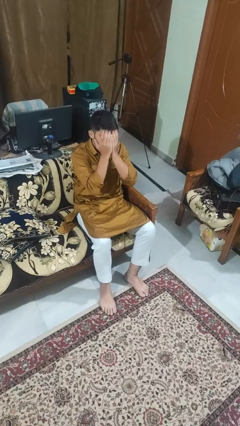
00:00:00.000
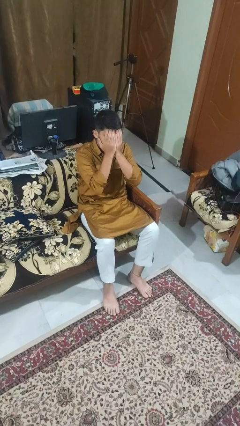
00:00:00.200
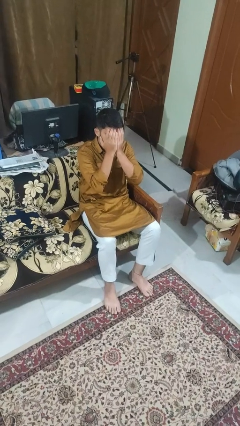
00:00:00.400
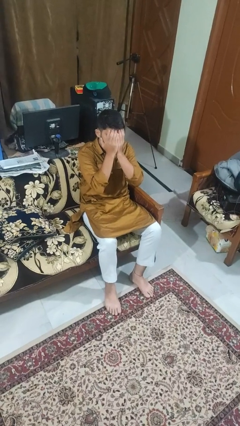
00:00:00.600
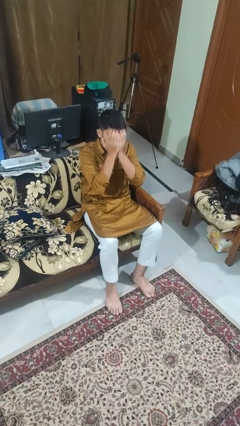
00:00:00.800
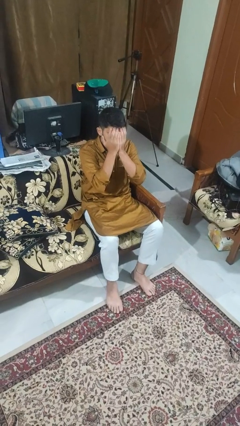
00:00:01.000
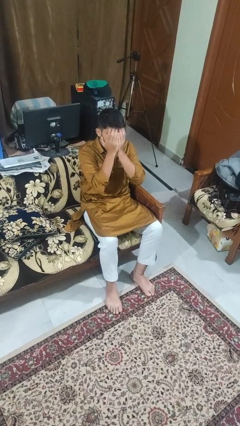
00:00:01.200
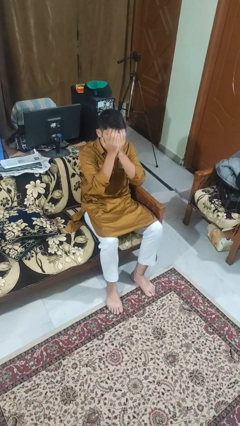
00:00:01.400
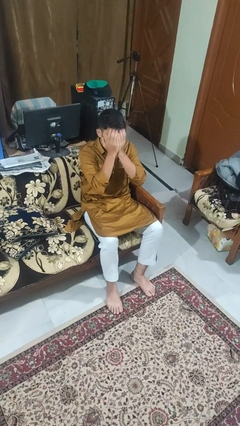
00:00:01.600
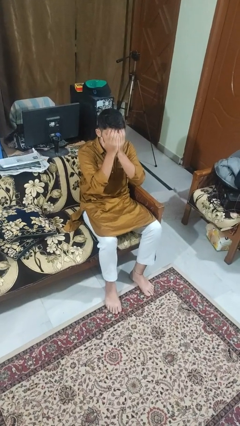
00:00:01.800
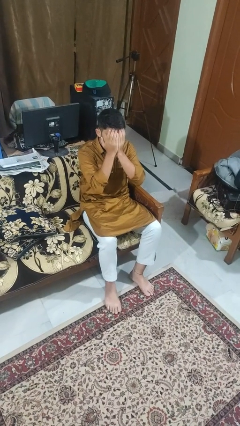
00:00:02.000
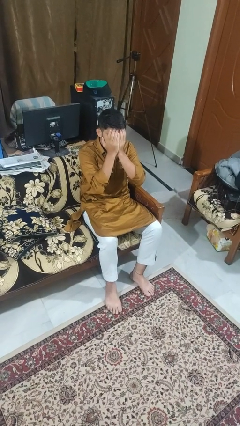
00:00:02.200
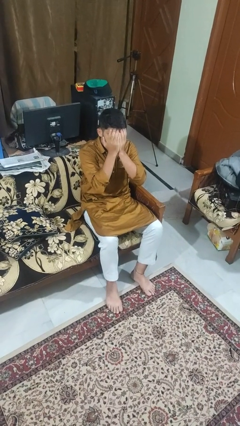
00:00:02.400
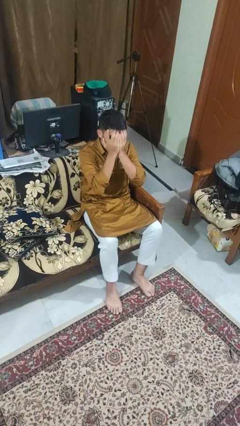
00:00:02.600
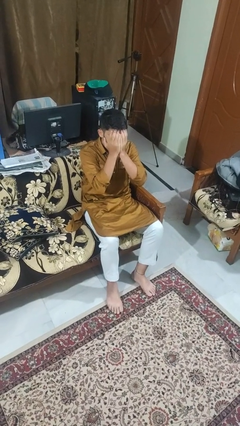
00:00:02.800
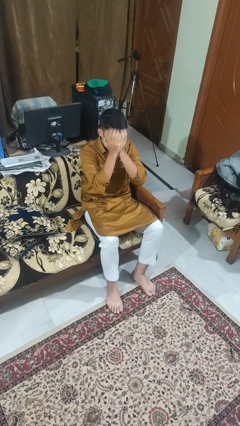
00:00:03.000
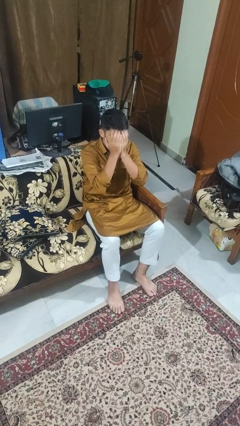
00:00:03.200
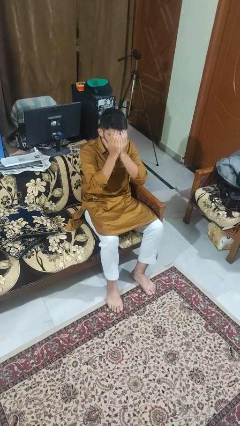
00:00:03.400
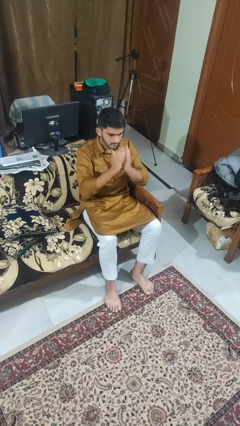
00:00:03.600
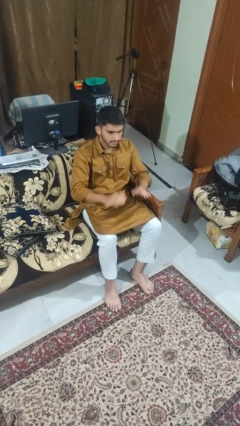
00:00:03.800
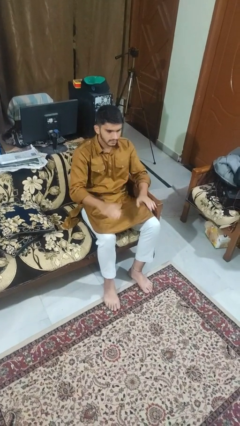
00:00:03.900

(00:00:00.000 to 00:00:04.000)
person covers face with hands

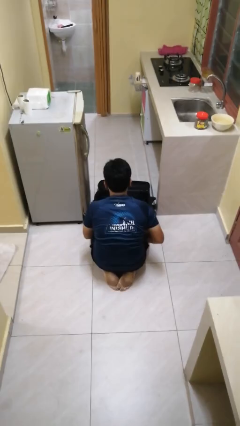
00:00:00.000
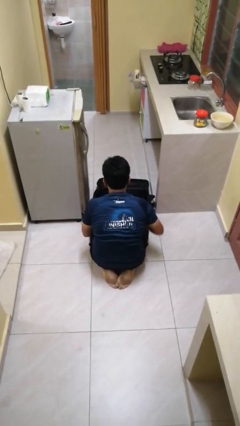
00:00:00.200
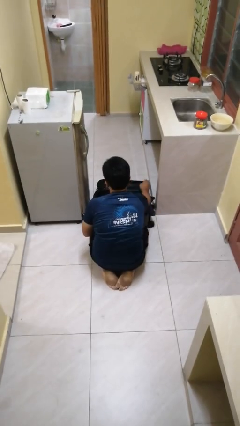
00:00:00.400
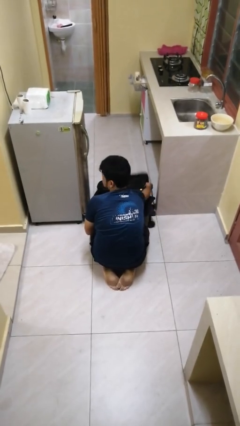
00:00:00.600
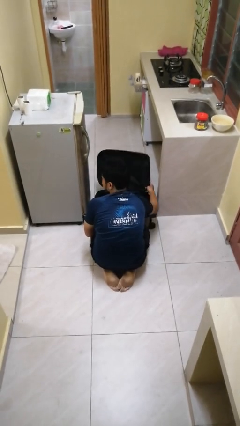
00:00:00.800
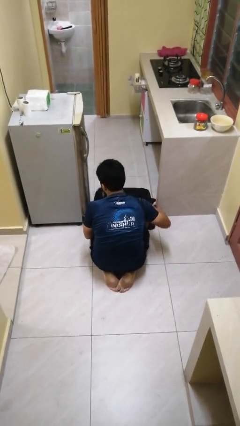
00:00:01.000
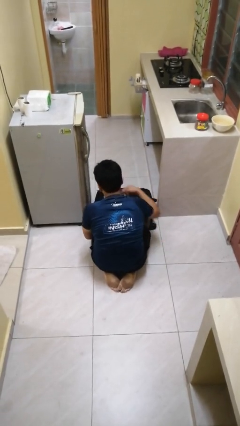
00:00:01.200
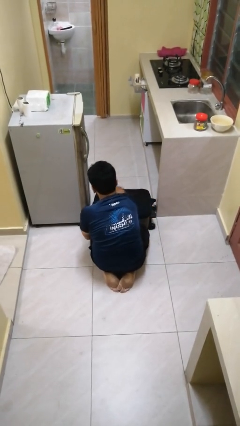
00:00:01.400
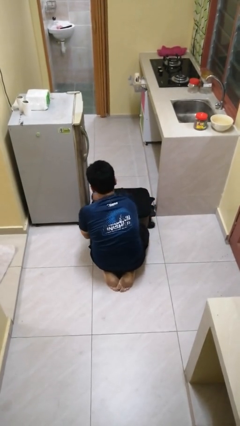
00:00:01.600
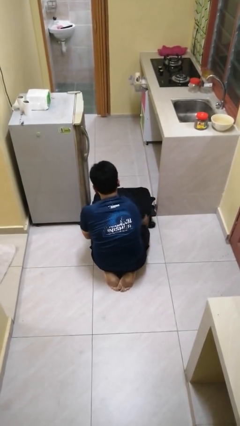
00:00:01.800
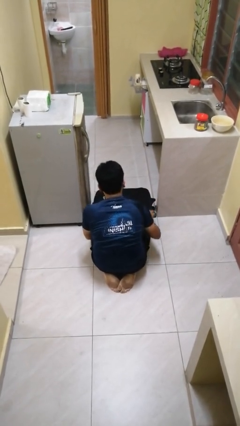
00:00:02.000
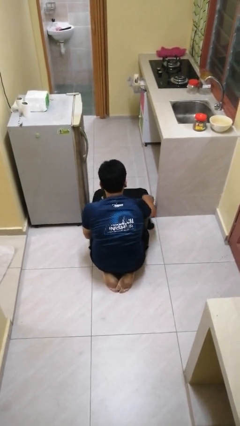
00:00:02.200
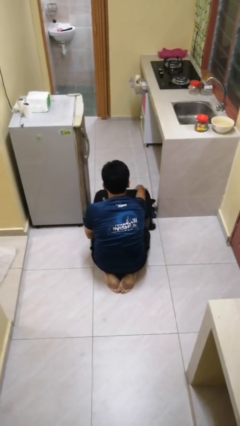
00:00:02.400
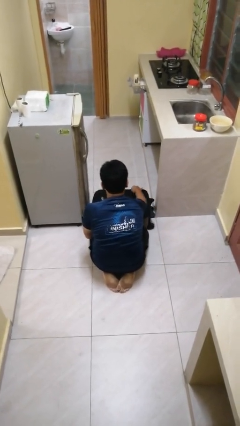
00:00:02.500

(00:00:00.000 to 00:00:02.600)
person closes suitcase

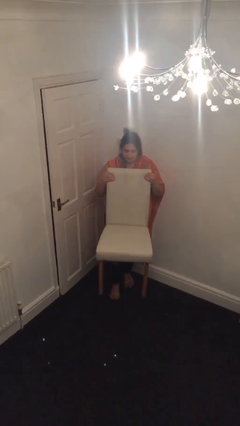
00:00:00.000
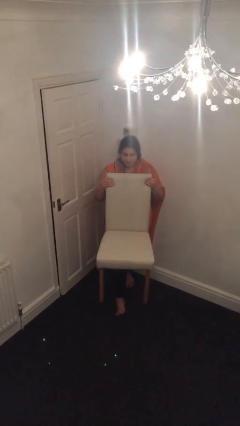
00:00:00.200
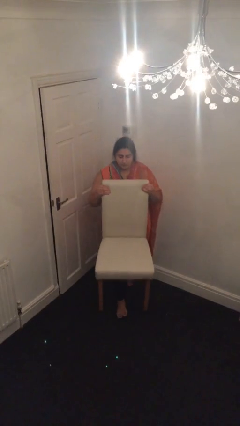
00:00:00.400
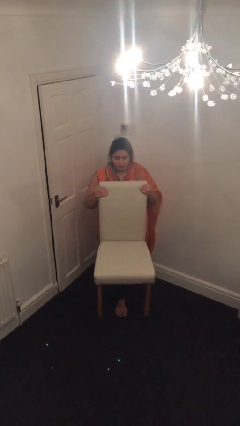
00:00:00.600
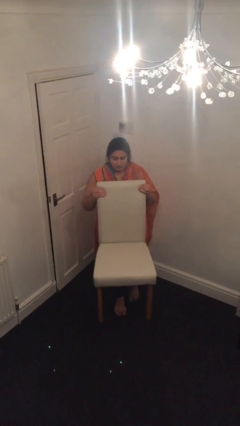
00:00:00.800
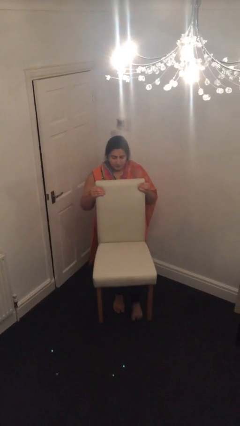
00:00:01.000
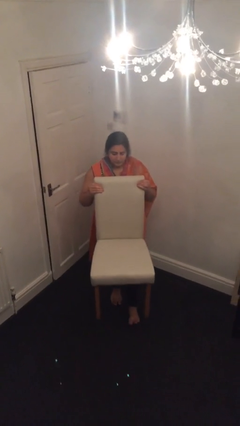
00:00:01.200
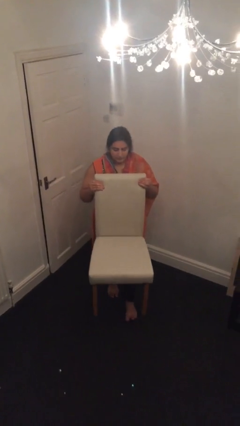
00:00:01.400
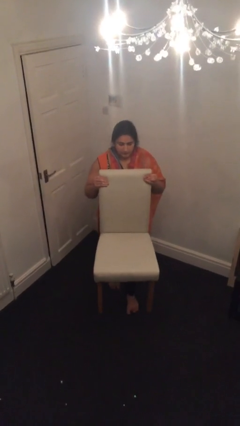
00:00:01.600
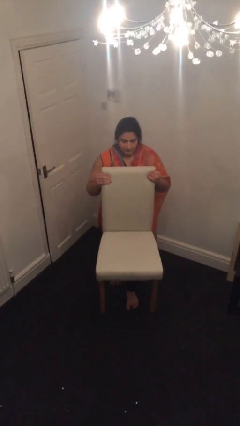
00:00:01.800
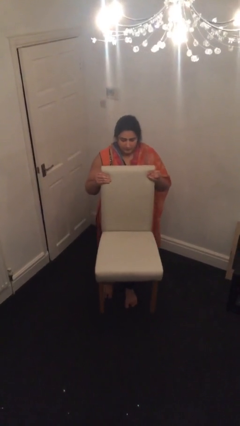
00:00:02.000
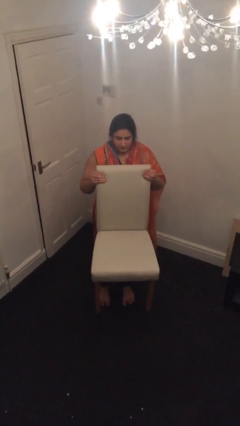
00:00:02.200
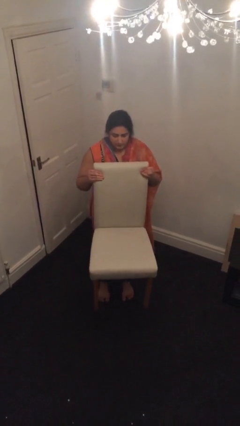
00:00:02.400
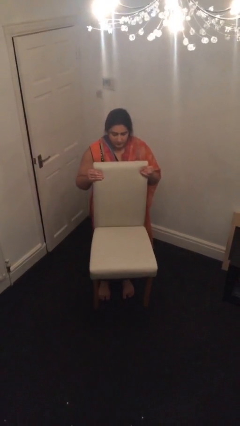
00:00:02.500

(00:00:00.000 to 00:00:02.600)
person carries heavy object

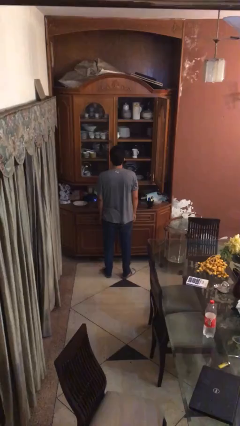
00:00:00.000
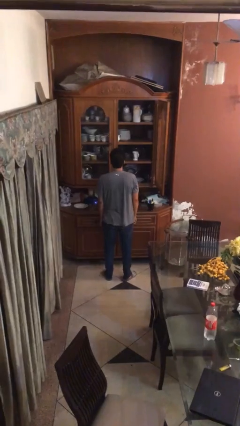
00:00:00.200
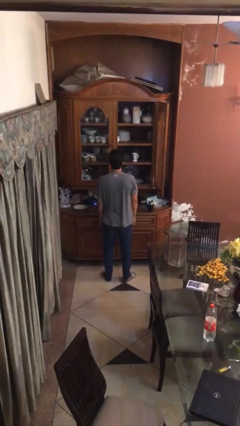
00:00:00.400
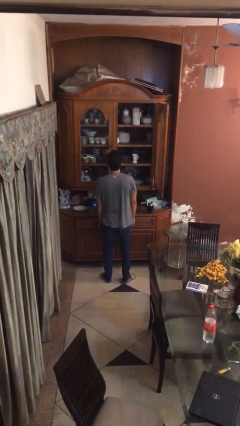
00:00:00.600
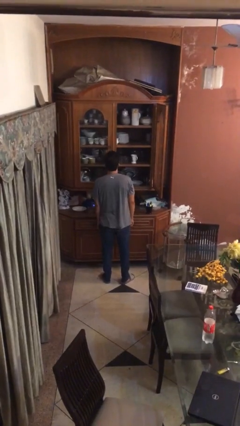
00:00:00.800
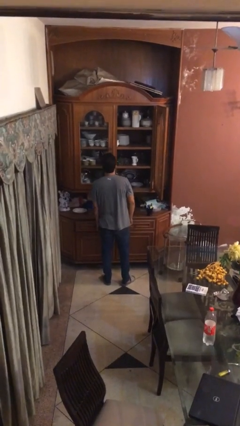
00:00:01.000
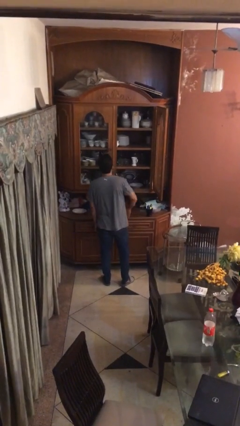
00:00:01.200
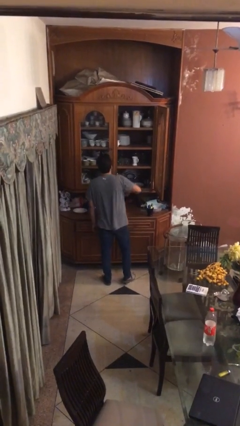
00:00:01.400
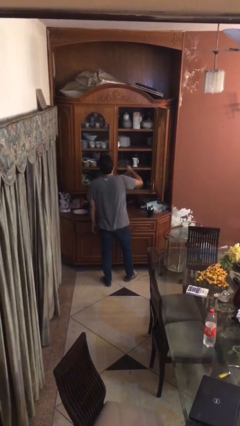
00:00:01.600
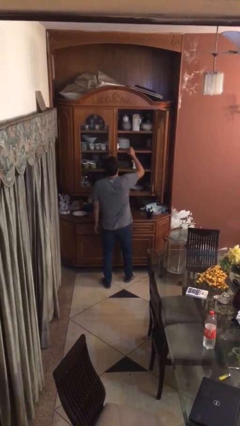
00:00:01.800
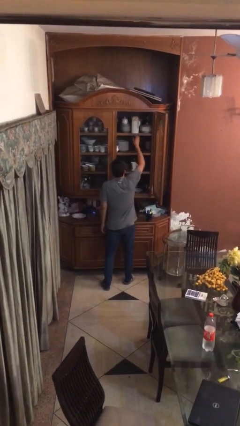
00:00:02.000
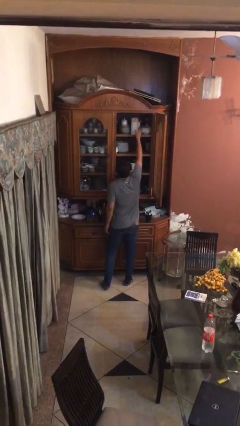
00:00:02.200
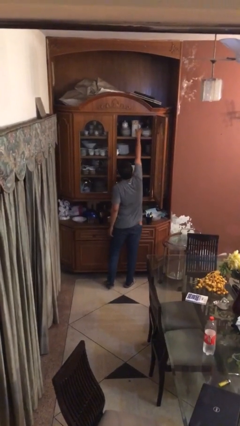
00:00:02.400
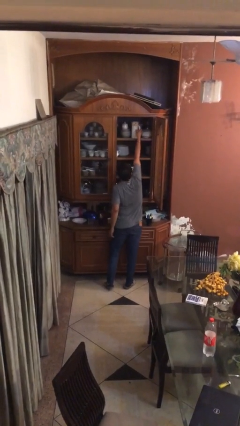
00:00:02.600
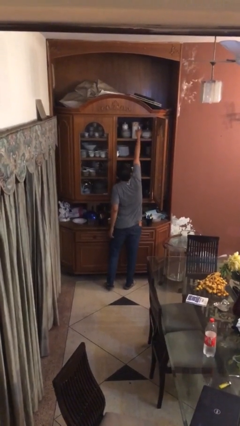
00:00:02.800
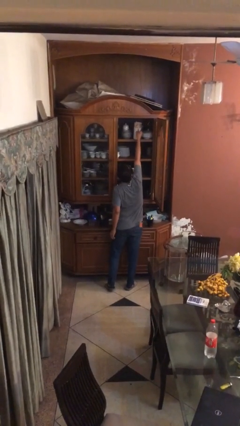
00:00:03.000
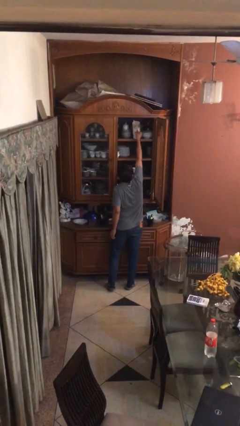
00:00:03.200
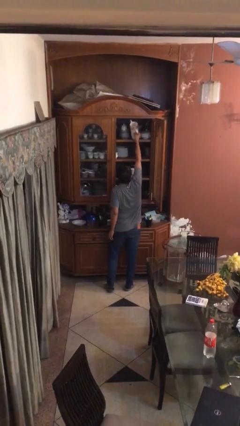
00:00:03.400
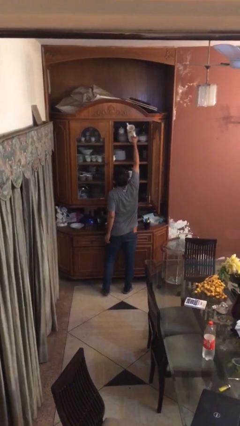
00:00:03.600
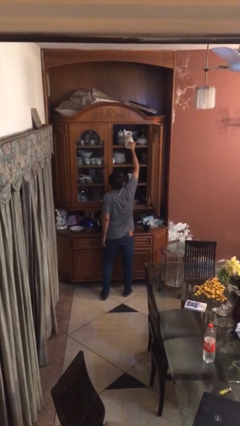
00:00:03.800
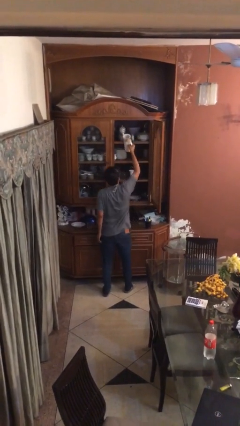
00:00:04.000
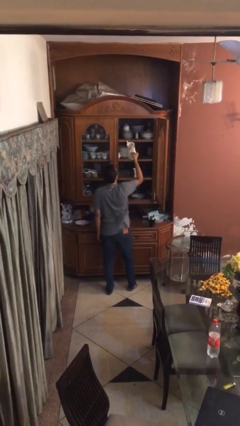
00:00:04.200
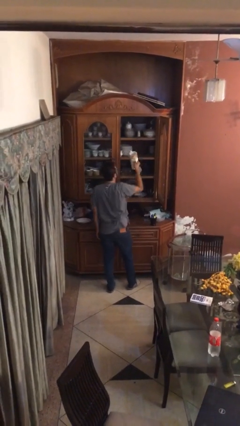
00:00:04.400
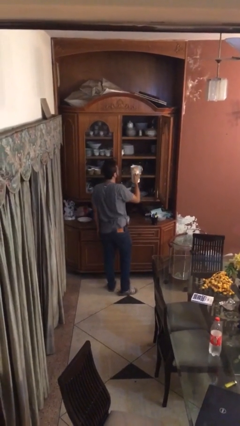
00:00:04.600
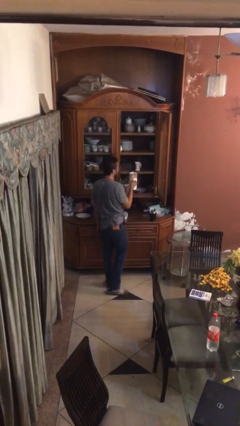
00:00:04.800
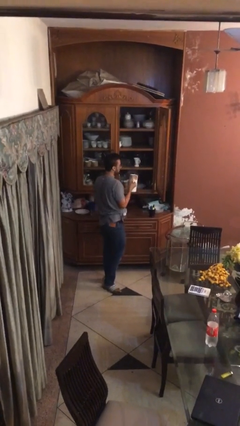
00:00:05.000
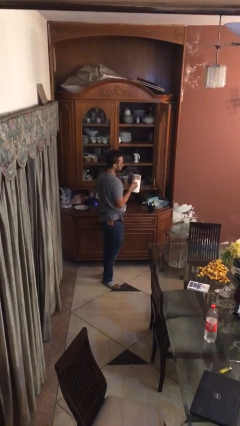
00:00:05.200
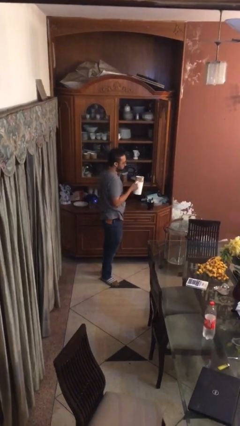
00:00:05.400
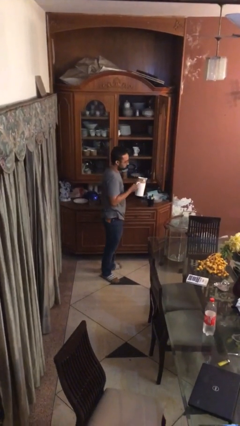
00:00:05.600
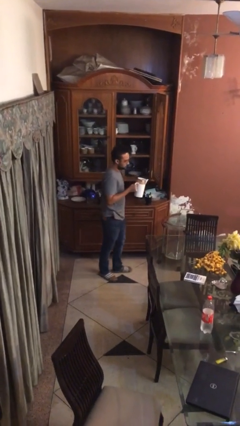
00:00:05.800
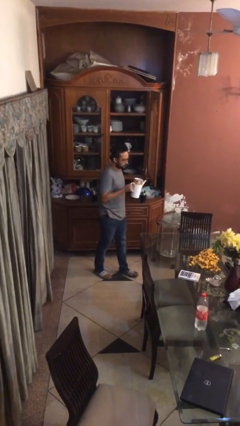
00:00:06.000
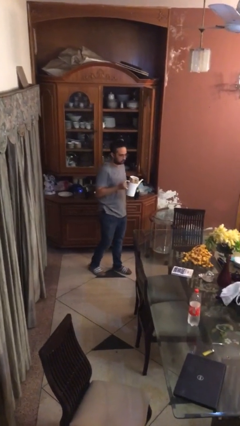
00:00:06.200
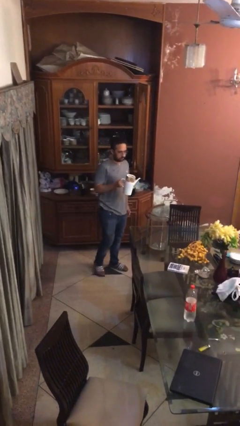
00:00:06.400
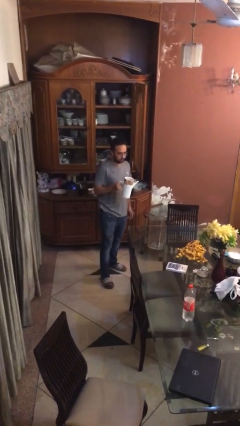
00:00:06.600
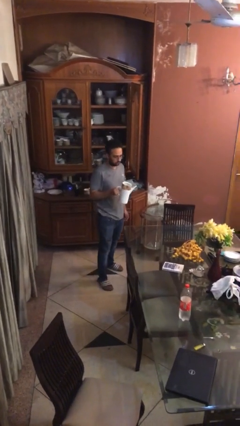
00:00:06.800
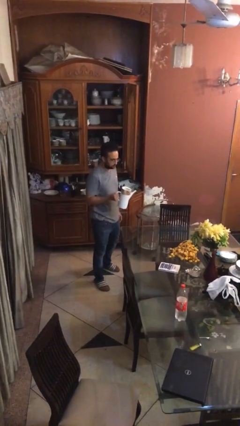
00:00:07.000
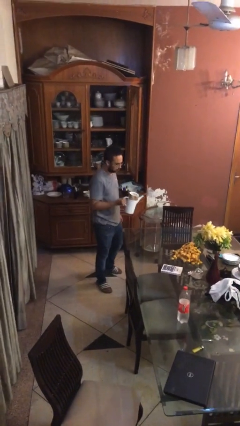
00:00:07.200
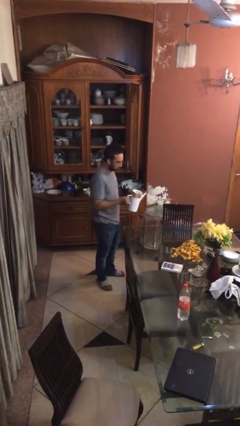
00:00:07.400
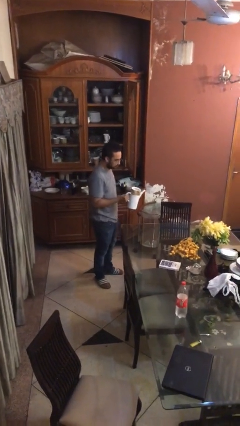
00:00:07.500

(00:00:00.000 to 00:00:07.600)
person picks up object from shelf

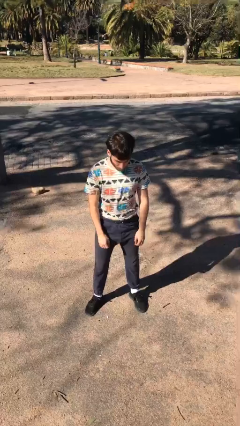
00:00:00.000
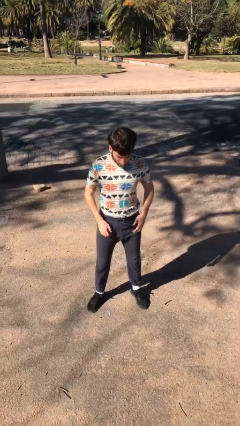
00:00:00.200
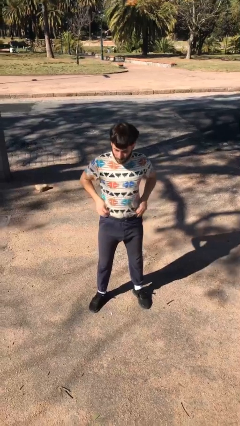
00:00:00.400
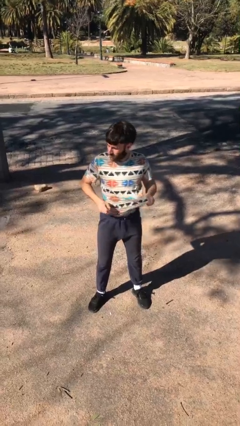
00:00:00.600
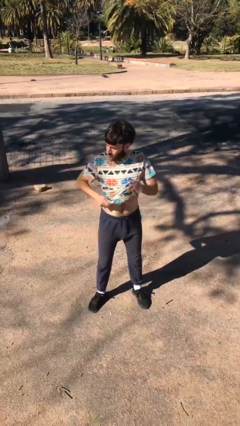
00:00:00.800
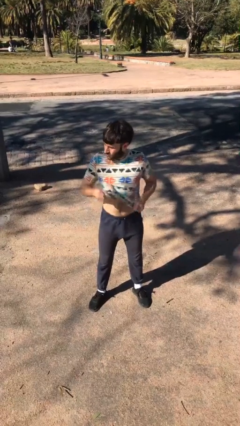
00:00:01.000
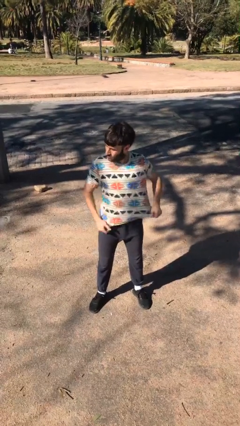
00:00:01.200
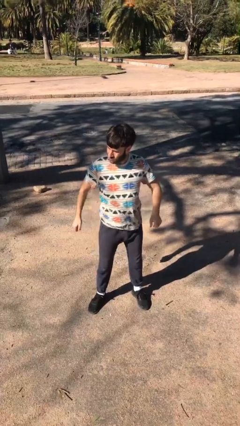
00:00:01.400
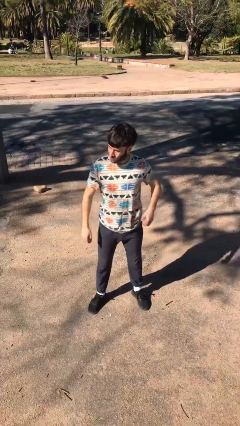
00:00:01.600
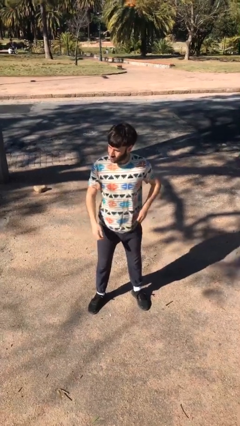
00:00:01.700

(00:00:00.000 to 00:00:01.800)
person untucks shirt
